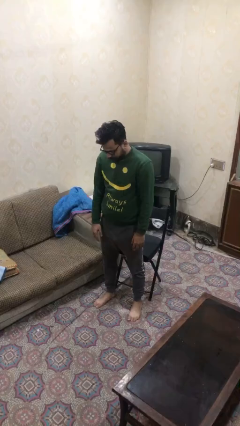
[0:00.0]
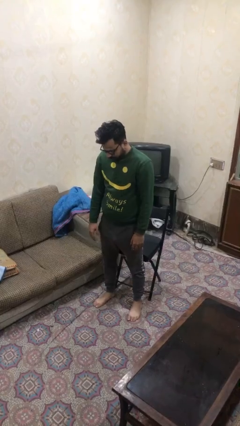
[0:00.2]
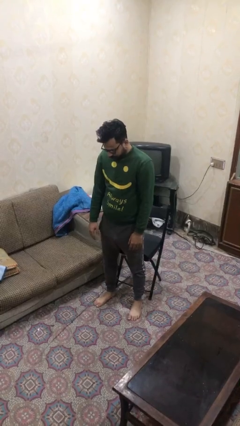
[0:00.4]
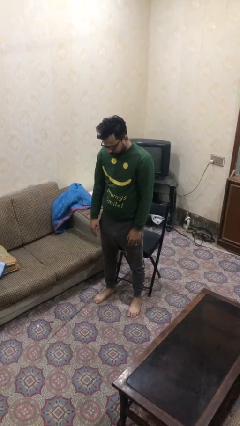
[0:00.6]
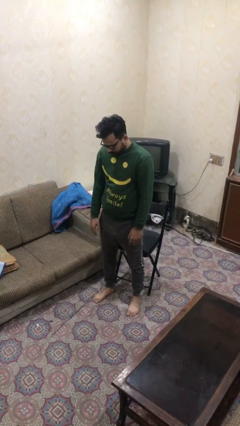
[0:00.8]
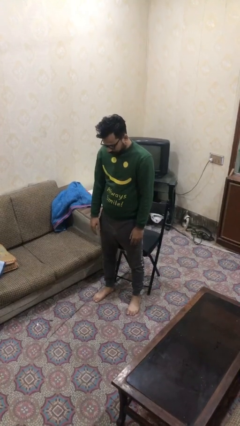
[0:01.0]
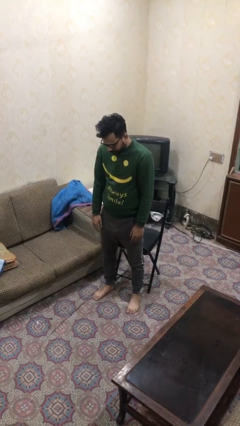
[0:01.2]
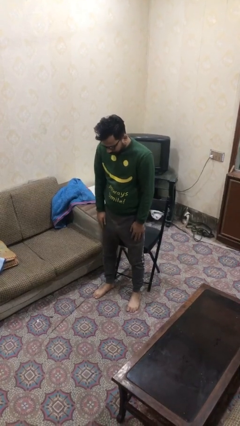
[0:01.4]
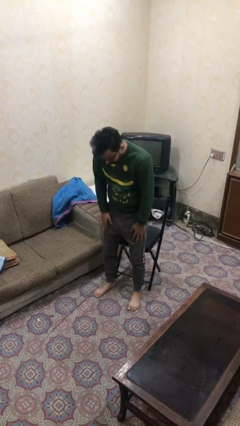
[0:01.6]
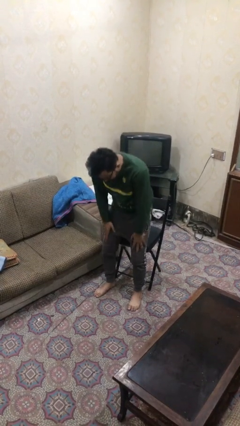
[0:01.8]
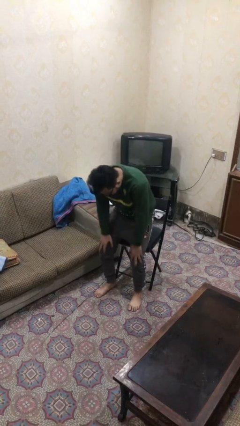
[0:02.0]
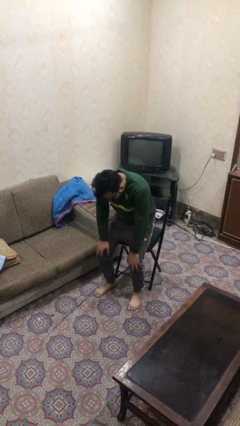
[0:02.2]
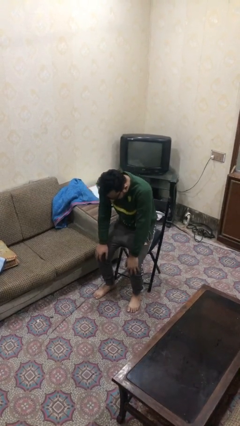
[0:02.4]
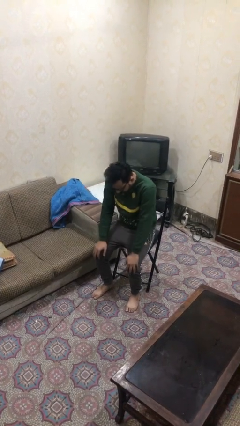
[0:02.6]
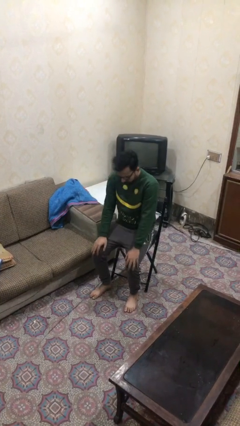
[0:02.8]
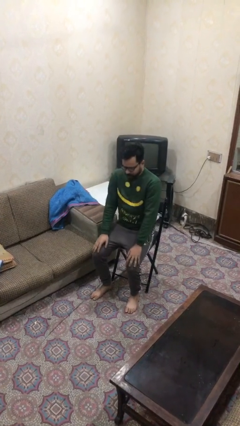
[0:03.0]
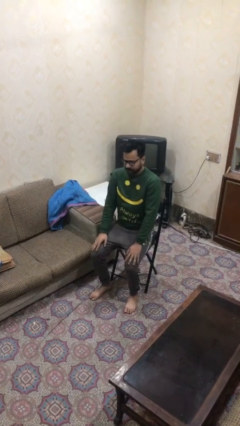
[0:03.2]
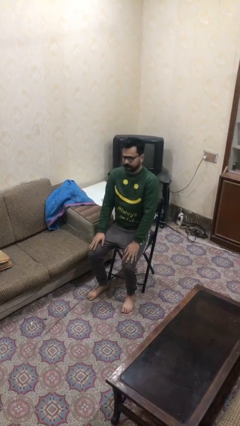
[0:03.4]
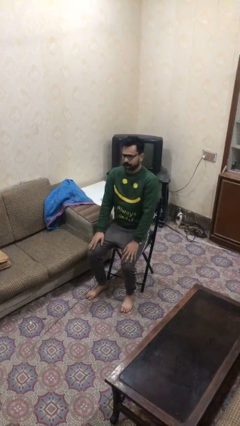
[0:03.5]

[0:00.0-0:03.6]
person sits down

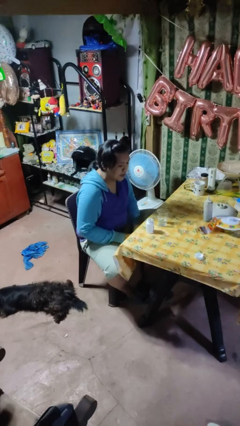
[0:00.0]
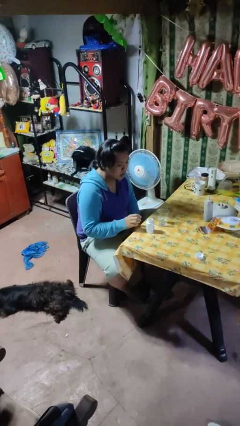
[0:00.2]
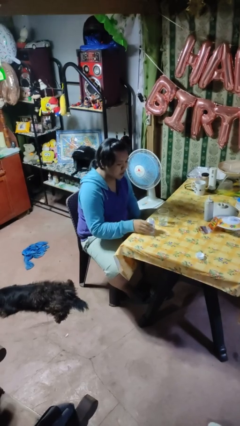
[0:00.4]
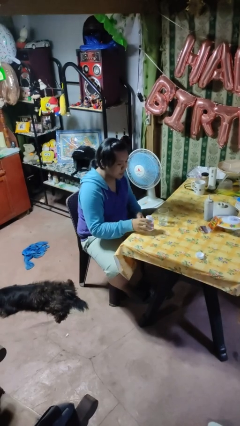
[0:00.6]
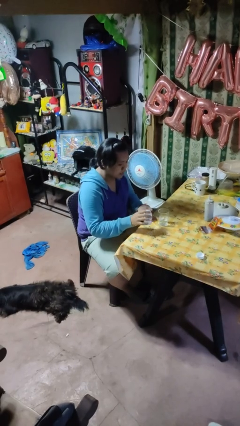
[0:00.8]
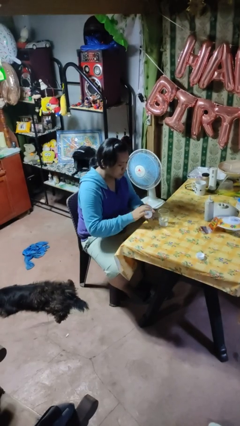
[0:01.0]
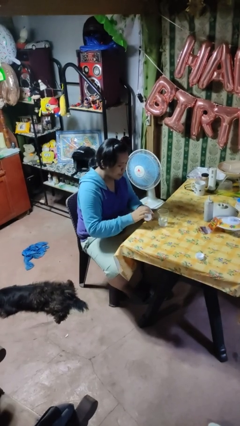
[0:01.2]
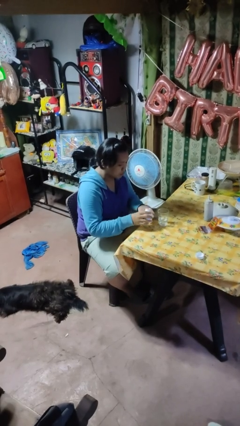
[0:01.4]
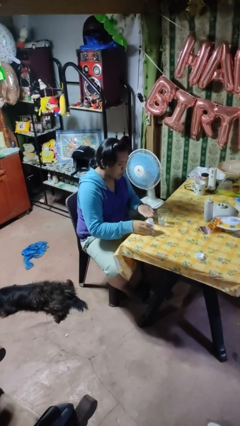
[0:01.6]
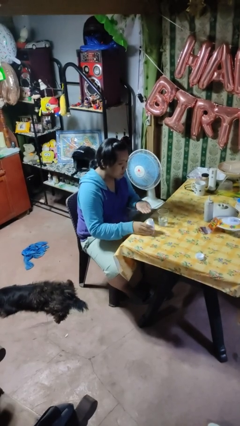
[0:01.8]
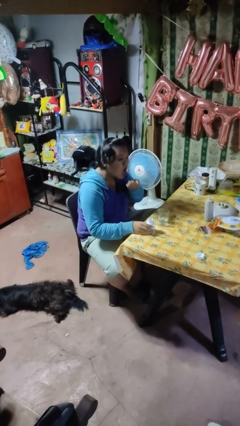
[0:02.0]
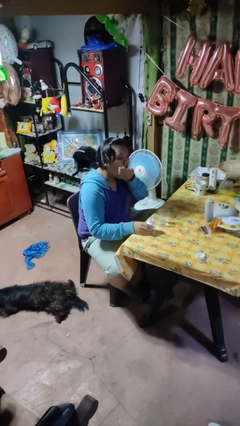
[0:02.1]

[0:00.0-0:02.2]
person takes medicine pills

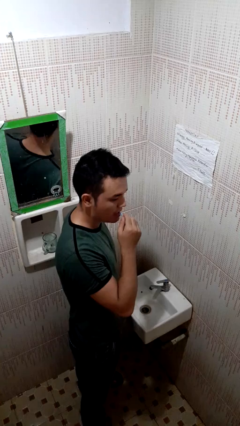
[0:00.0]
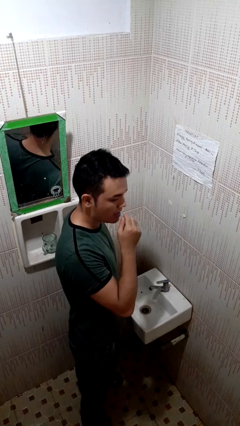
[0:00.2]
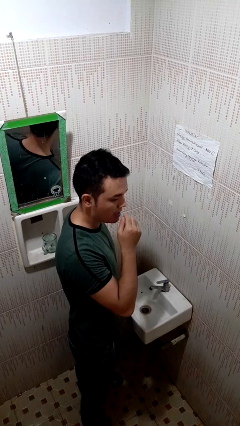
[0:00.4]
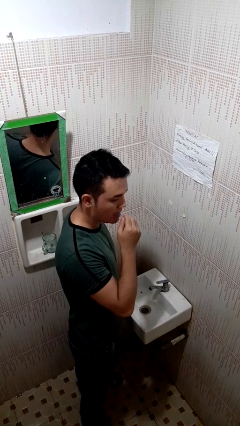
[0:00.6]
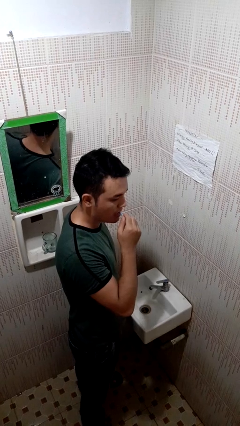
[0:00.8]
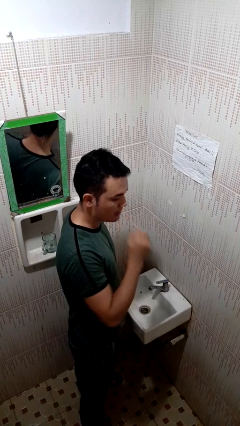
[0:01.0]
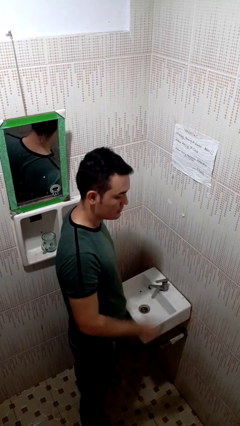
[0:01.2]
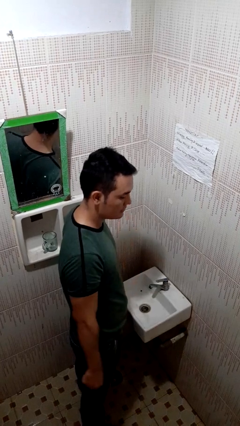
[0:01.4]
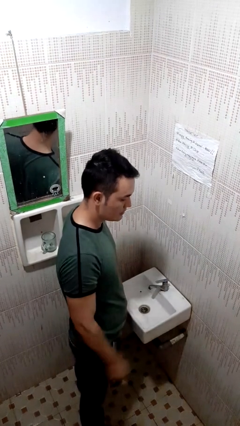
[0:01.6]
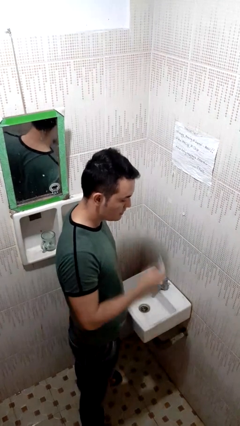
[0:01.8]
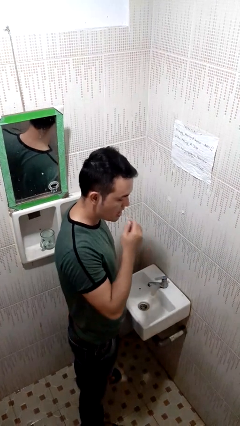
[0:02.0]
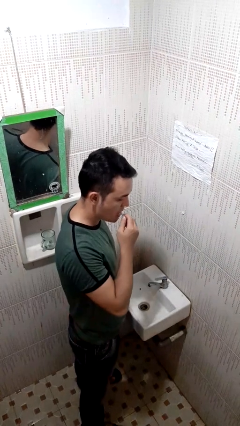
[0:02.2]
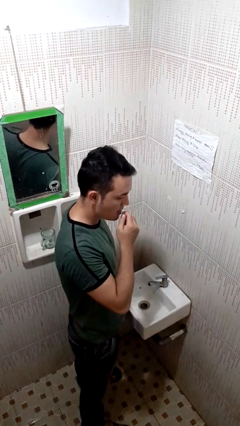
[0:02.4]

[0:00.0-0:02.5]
person flosses

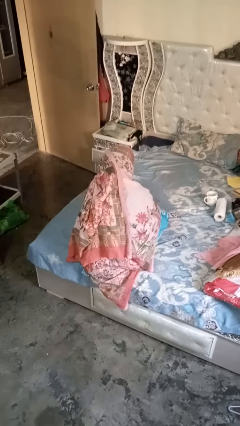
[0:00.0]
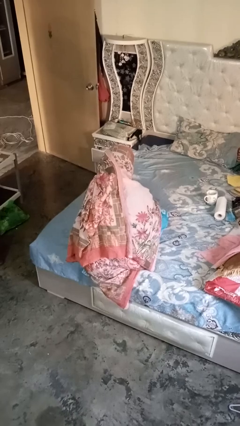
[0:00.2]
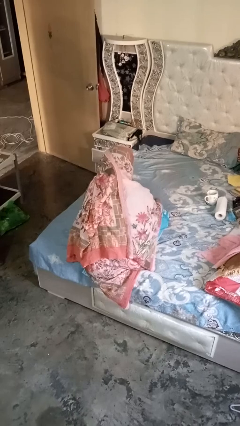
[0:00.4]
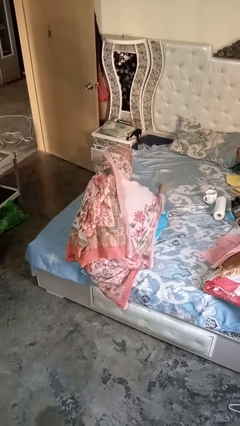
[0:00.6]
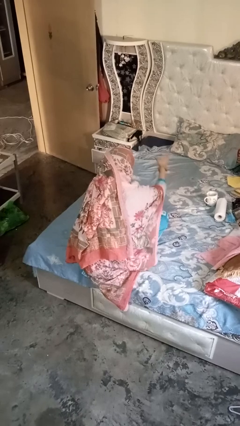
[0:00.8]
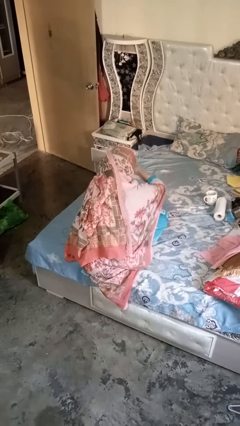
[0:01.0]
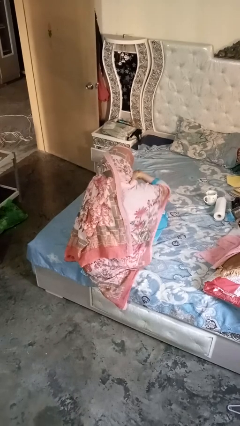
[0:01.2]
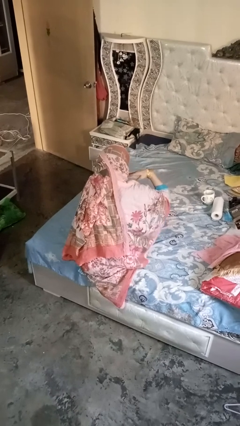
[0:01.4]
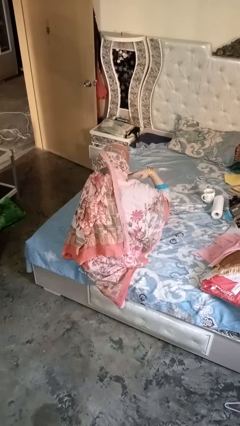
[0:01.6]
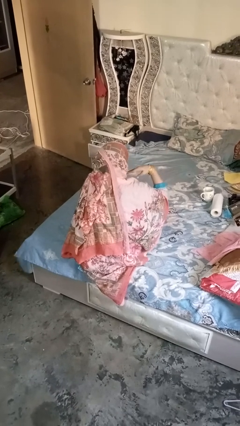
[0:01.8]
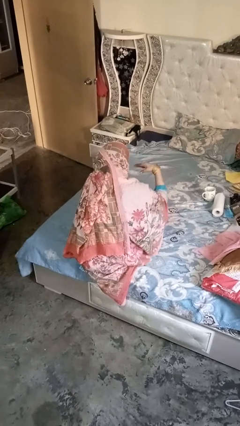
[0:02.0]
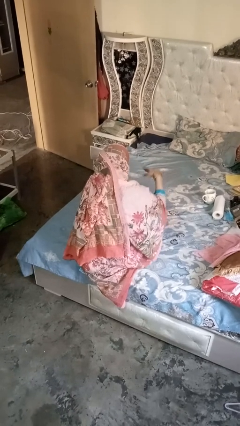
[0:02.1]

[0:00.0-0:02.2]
person gestures cut

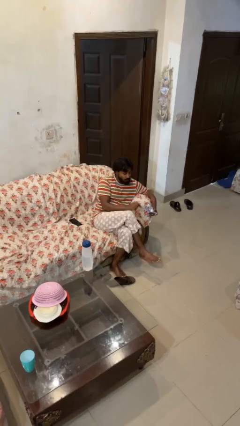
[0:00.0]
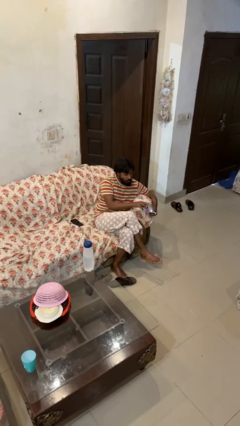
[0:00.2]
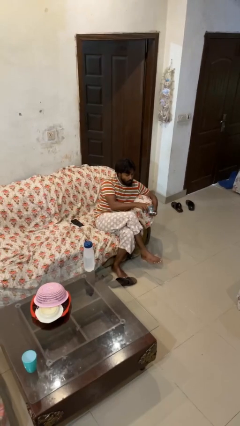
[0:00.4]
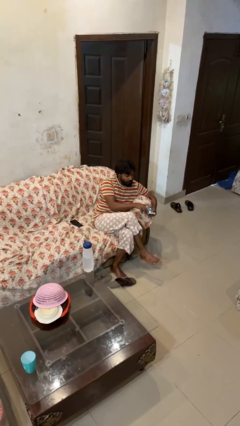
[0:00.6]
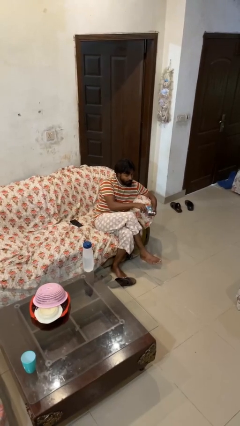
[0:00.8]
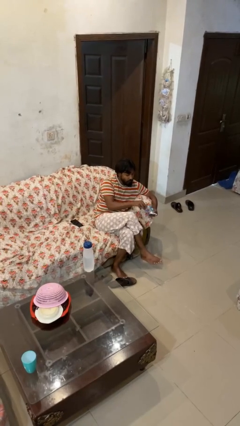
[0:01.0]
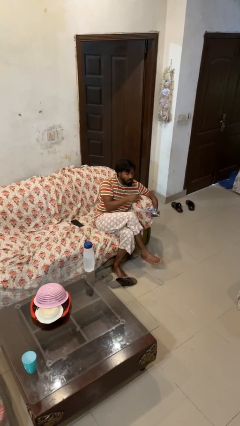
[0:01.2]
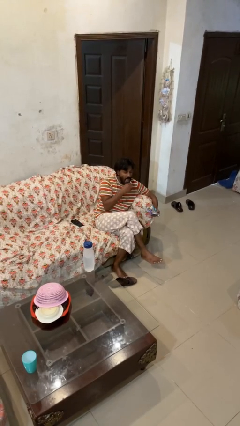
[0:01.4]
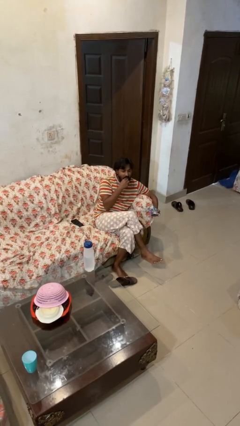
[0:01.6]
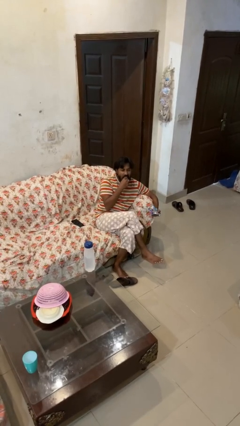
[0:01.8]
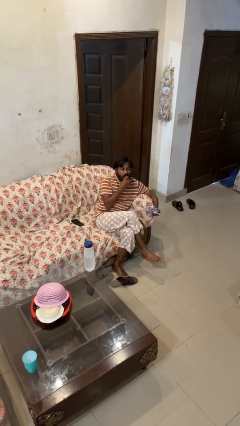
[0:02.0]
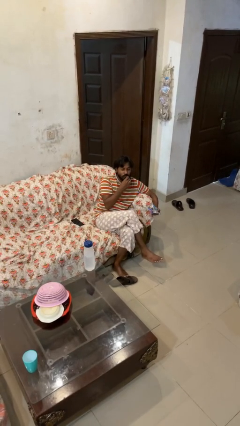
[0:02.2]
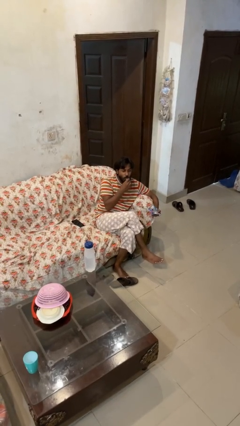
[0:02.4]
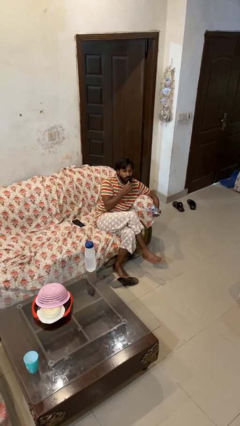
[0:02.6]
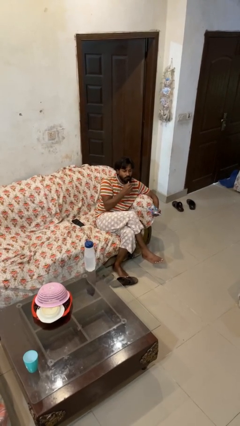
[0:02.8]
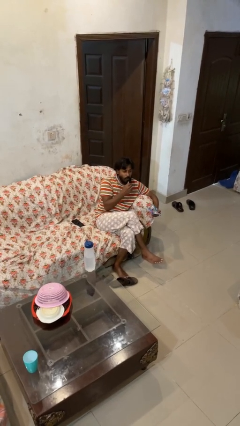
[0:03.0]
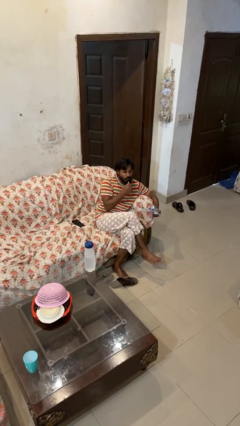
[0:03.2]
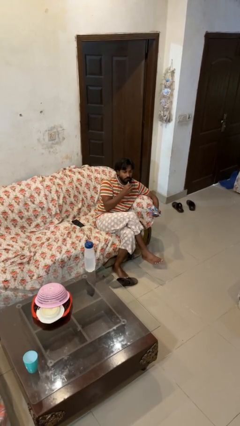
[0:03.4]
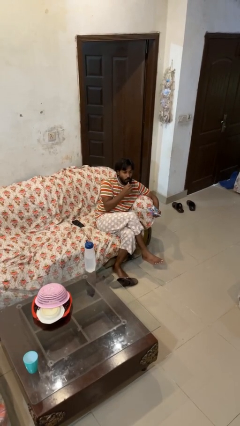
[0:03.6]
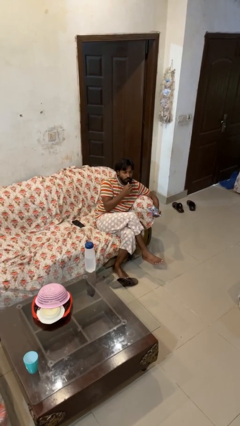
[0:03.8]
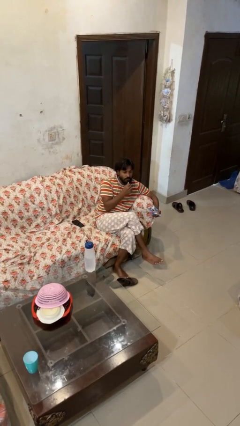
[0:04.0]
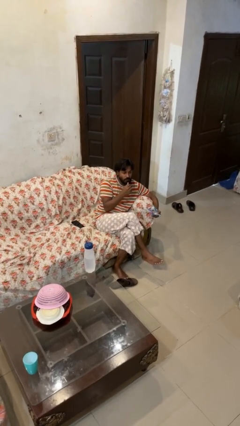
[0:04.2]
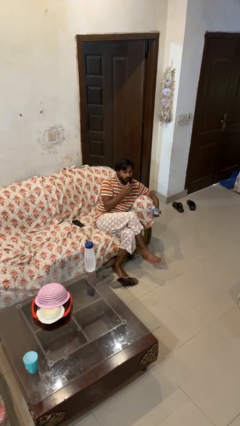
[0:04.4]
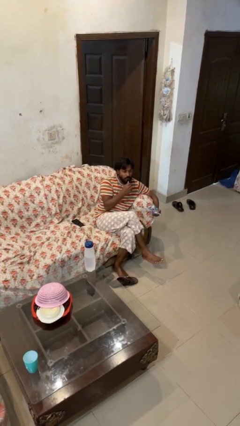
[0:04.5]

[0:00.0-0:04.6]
person eats snack from bag

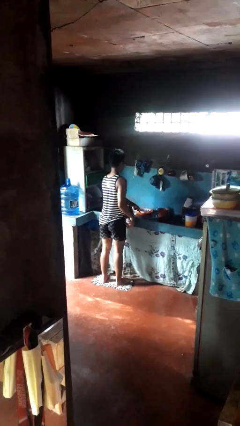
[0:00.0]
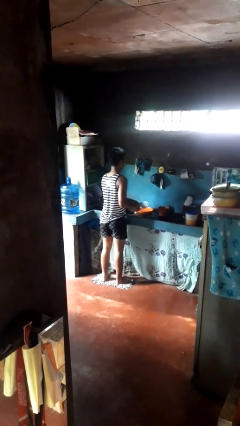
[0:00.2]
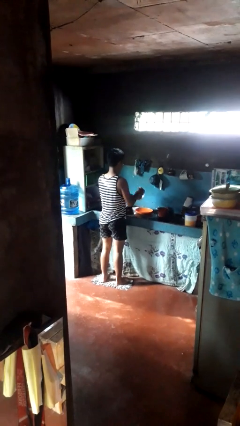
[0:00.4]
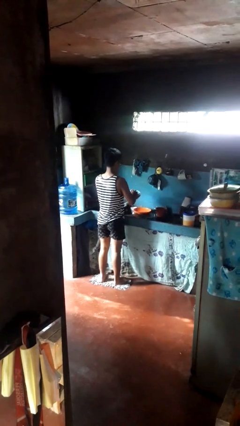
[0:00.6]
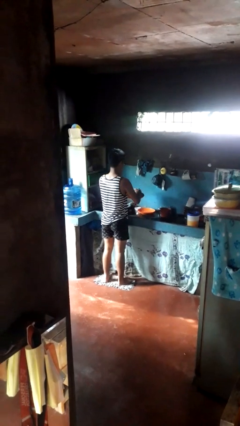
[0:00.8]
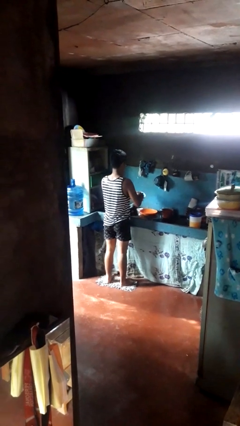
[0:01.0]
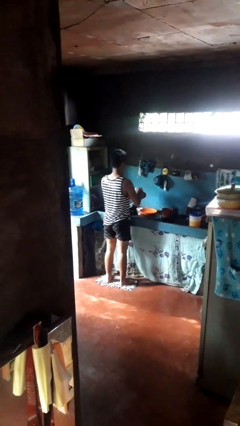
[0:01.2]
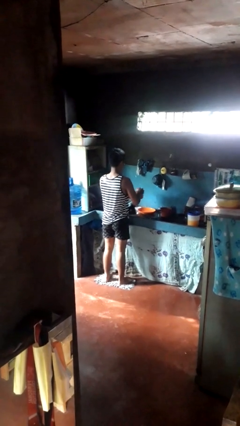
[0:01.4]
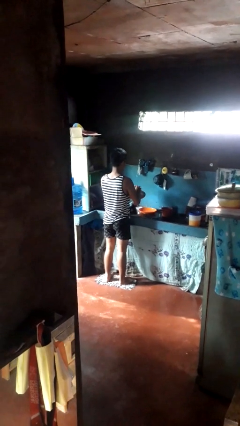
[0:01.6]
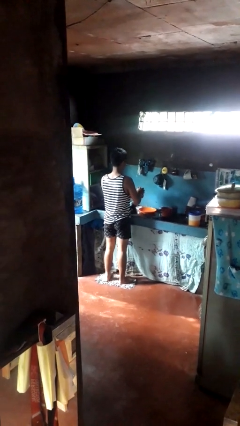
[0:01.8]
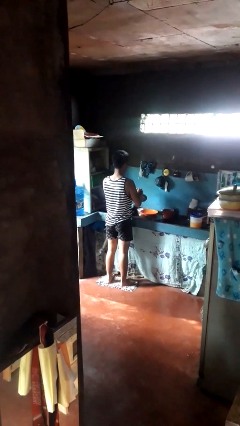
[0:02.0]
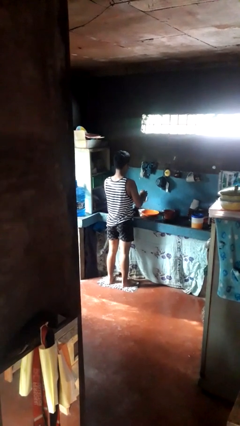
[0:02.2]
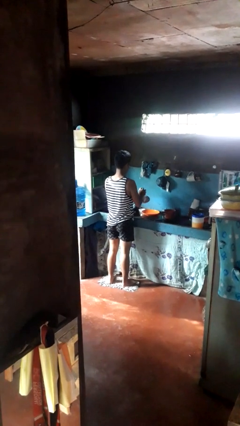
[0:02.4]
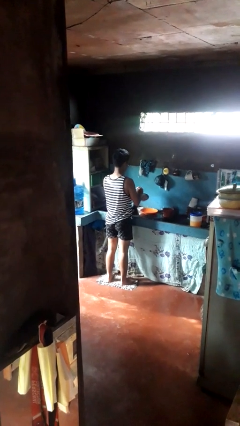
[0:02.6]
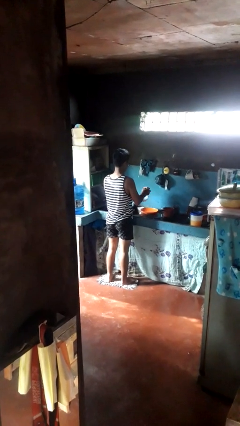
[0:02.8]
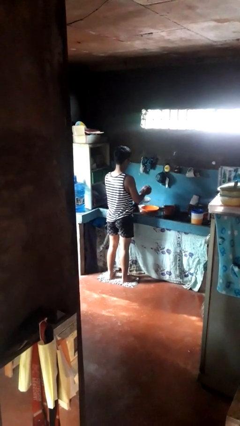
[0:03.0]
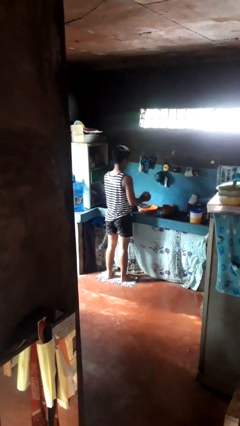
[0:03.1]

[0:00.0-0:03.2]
person dries dish
